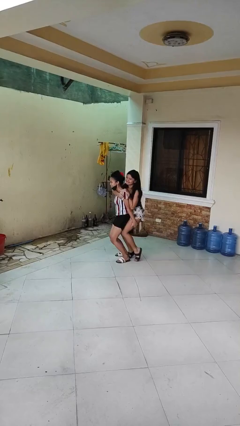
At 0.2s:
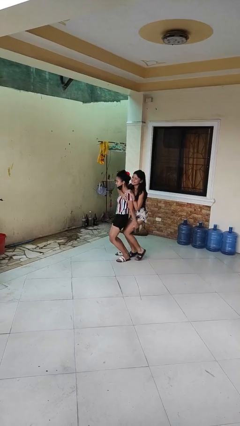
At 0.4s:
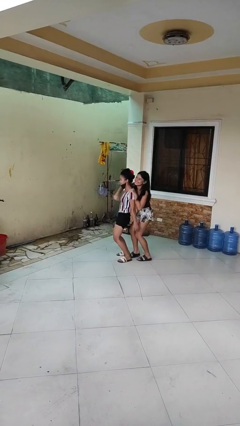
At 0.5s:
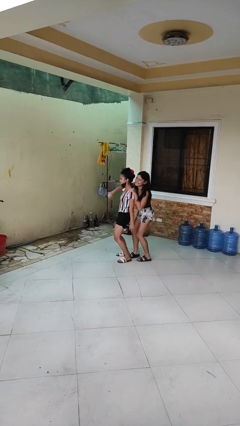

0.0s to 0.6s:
person puts down person

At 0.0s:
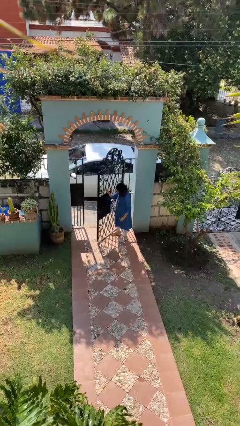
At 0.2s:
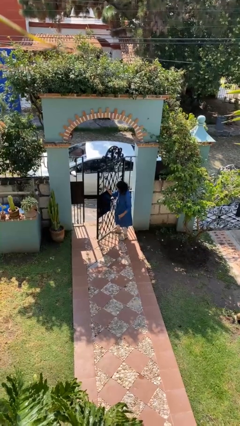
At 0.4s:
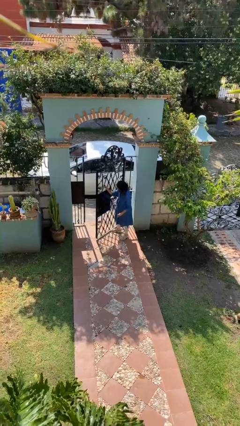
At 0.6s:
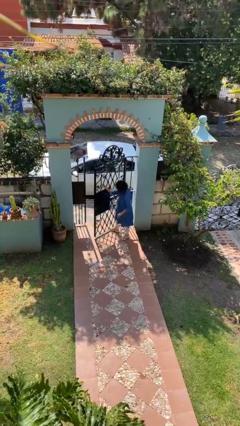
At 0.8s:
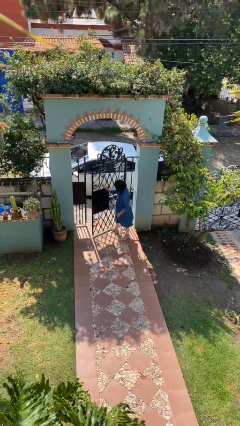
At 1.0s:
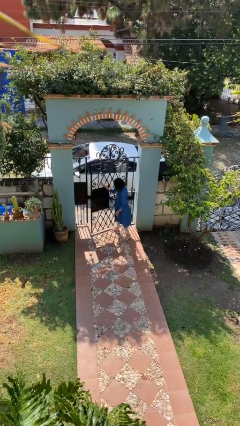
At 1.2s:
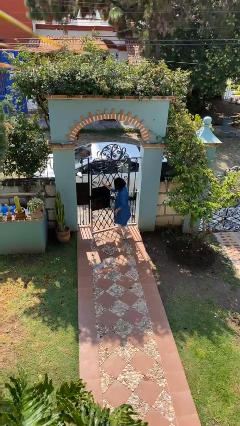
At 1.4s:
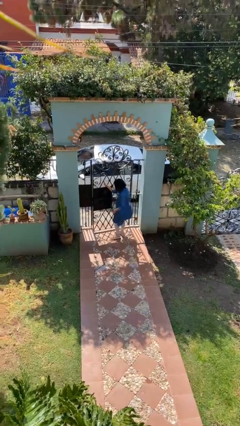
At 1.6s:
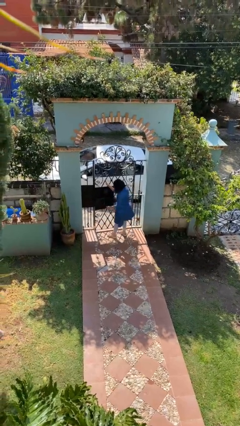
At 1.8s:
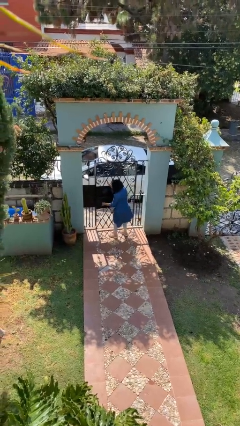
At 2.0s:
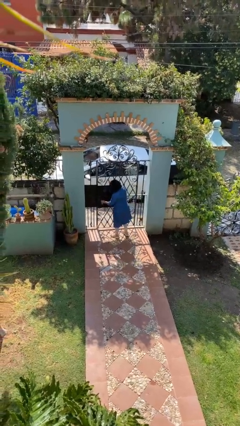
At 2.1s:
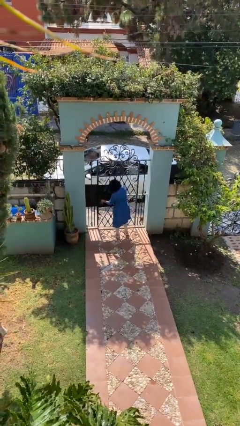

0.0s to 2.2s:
person closes facility door

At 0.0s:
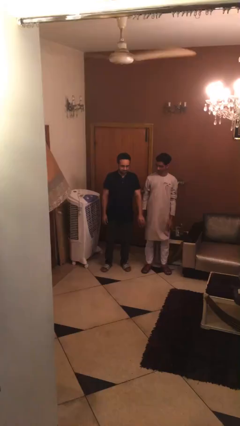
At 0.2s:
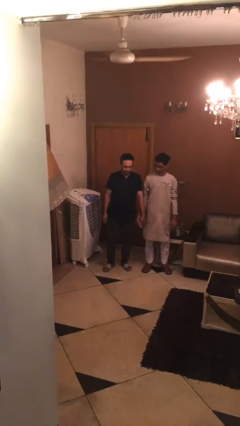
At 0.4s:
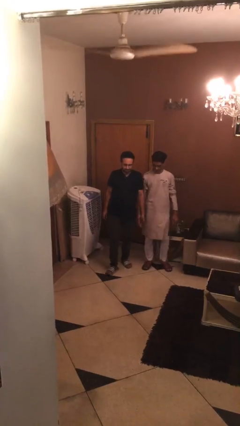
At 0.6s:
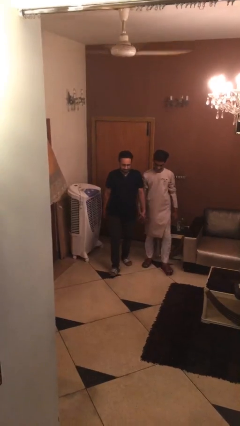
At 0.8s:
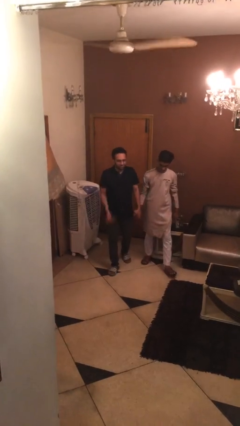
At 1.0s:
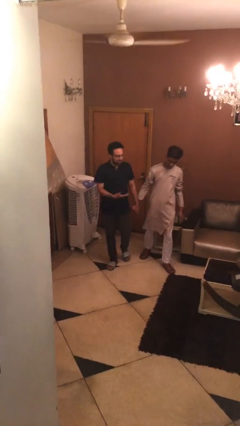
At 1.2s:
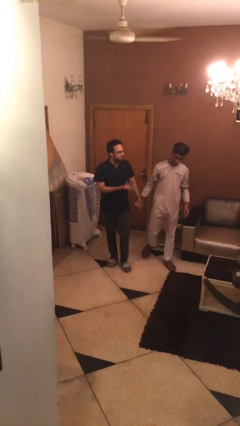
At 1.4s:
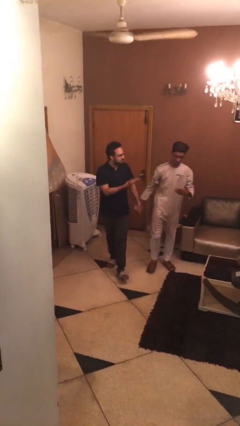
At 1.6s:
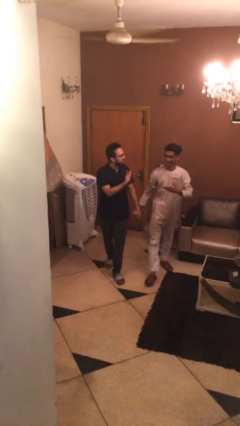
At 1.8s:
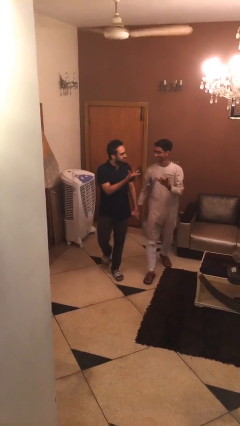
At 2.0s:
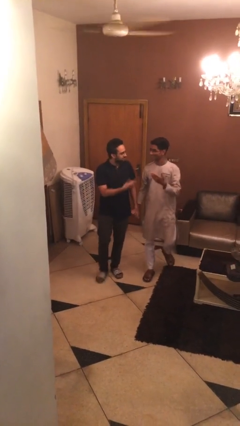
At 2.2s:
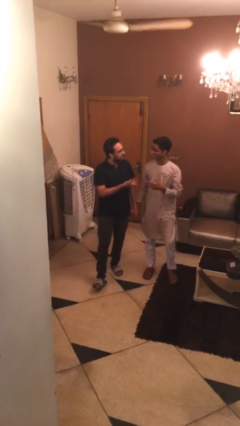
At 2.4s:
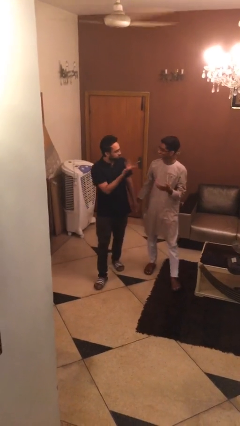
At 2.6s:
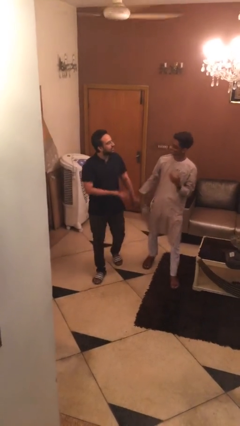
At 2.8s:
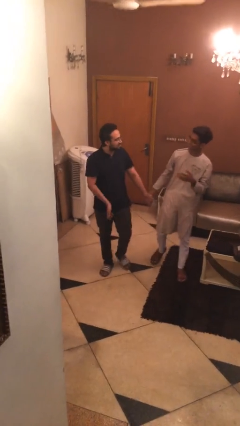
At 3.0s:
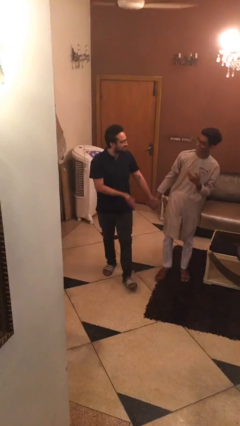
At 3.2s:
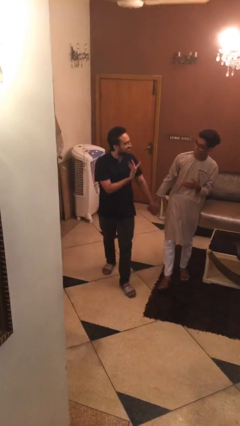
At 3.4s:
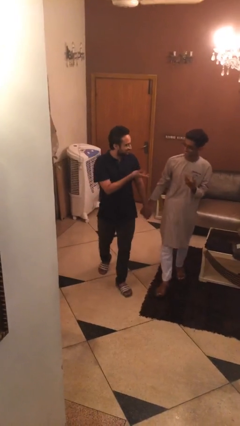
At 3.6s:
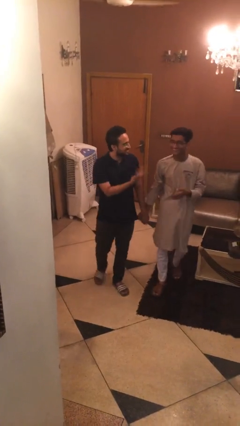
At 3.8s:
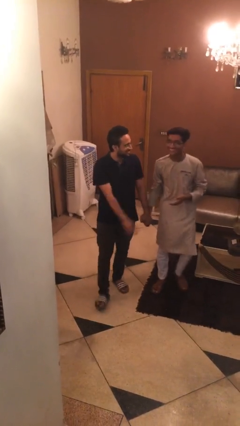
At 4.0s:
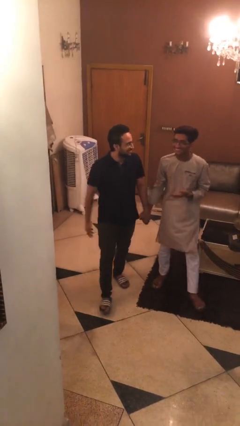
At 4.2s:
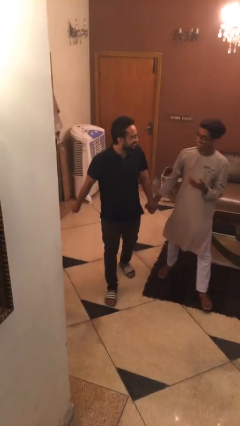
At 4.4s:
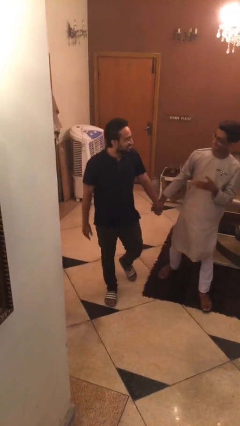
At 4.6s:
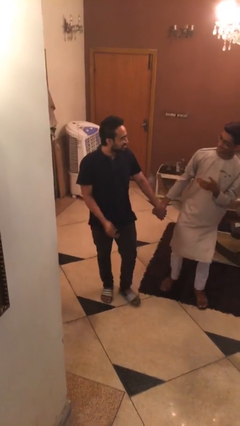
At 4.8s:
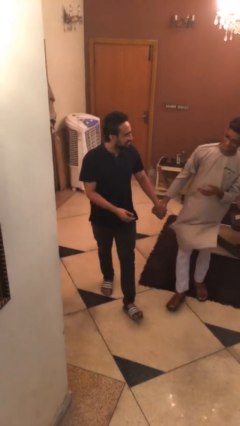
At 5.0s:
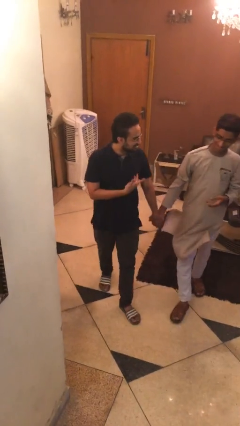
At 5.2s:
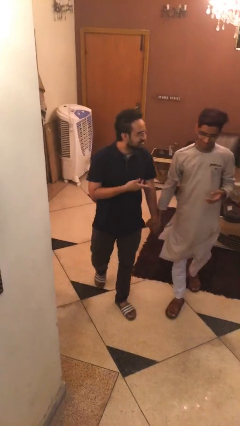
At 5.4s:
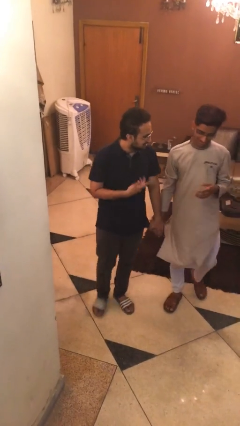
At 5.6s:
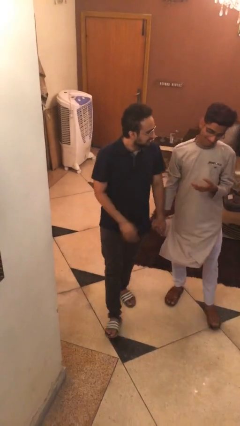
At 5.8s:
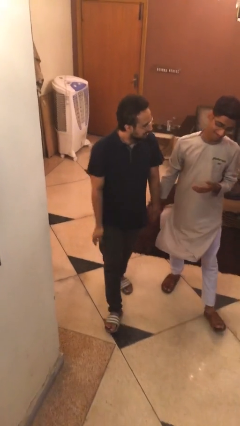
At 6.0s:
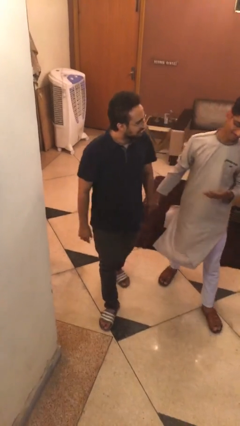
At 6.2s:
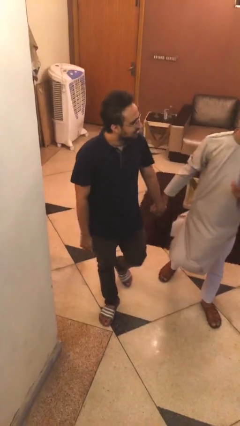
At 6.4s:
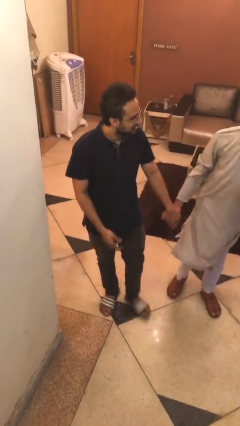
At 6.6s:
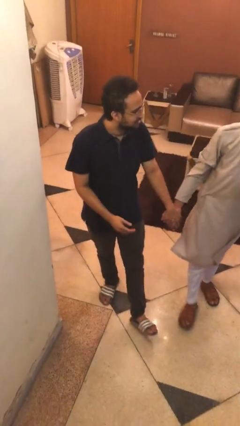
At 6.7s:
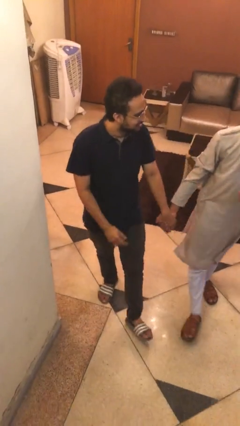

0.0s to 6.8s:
person holds hand

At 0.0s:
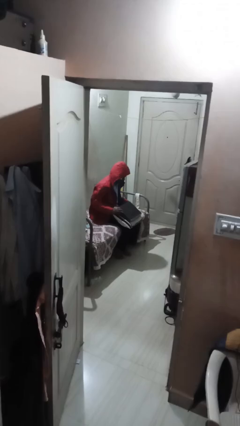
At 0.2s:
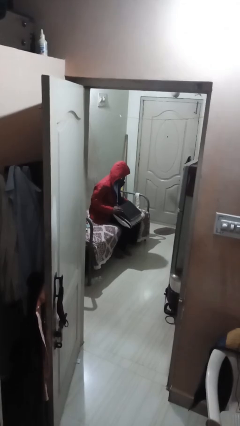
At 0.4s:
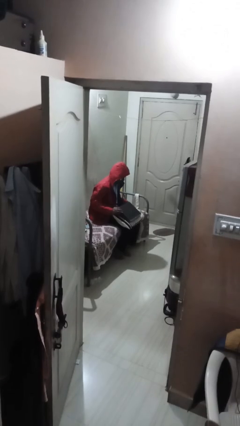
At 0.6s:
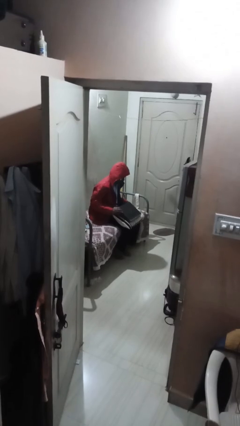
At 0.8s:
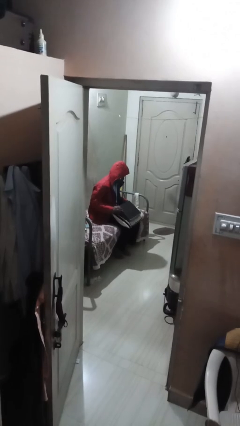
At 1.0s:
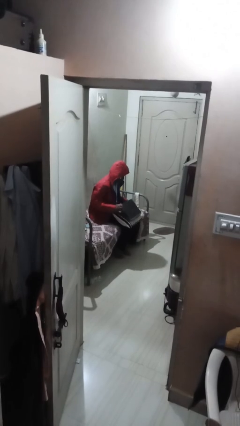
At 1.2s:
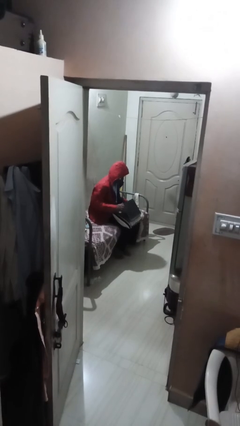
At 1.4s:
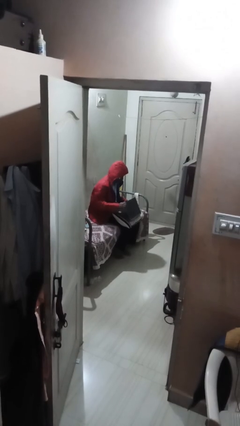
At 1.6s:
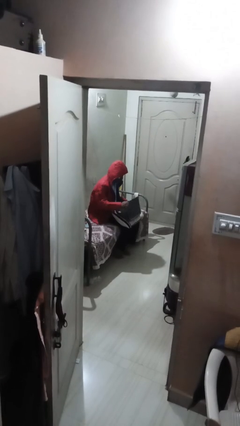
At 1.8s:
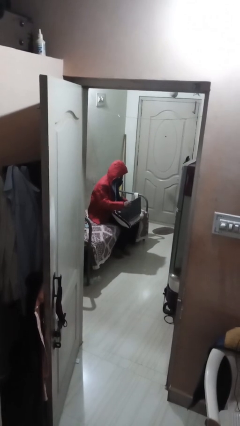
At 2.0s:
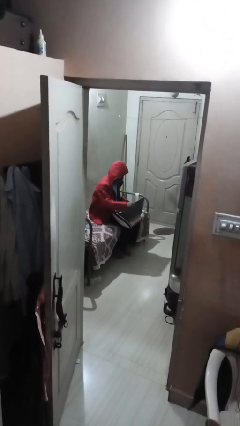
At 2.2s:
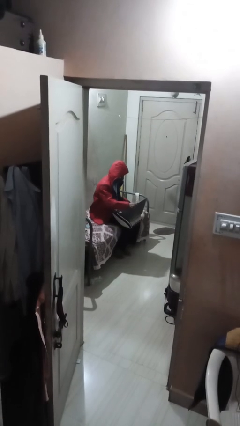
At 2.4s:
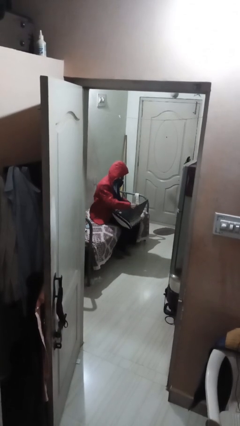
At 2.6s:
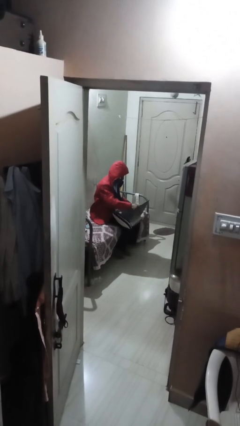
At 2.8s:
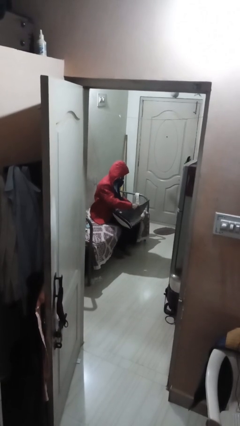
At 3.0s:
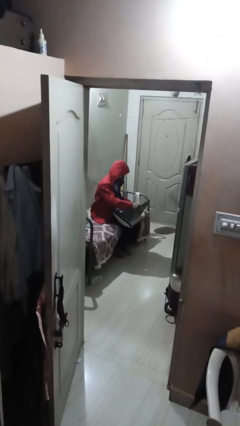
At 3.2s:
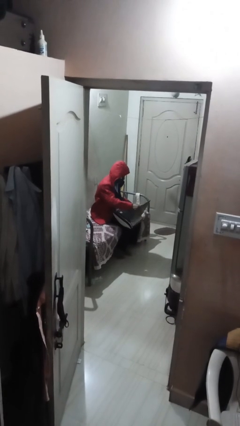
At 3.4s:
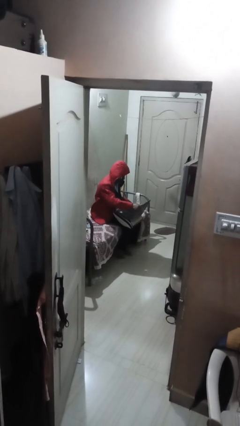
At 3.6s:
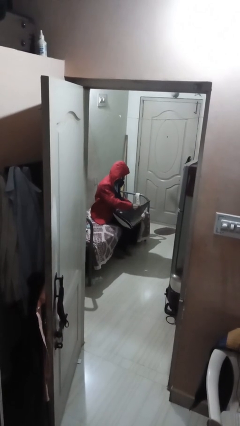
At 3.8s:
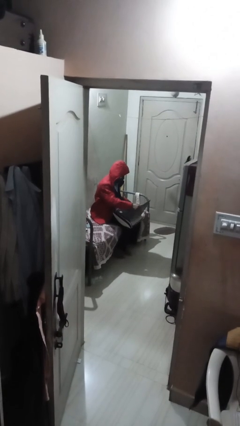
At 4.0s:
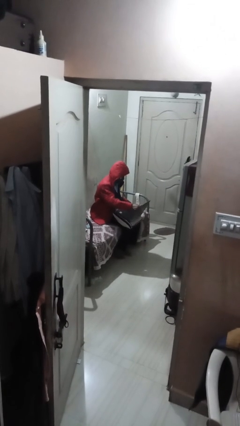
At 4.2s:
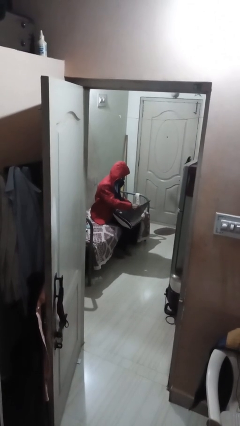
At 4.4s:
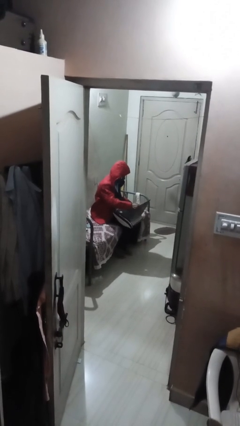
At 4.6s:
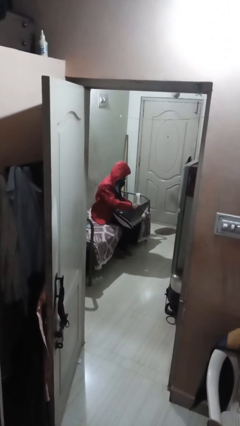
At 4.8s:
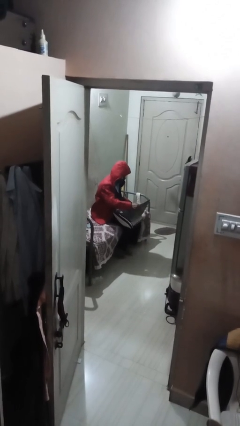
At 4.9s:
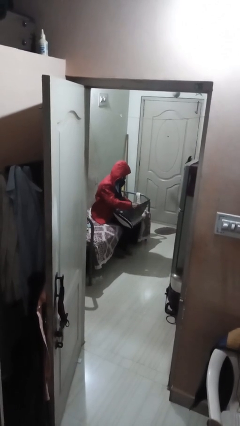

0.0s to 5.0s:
person interacts with laptop

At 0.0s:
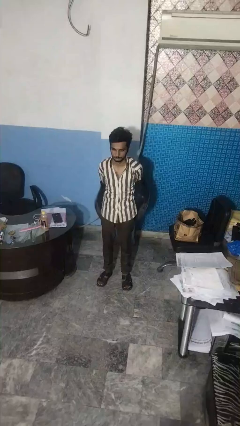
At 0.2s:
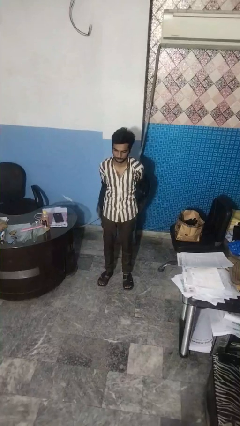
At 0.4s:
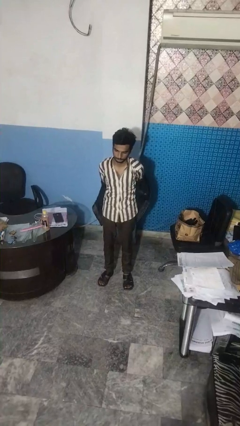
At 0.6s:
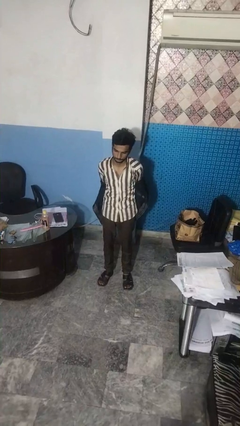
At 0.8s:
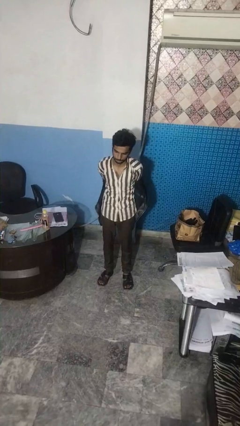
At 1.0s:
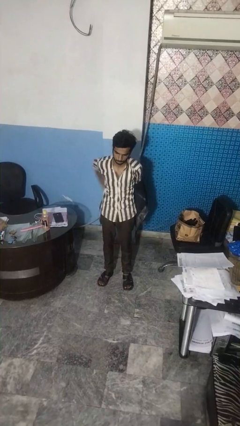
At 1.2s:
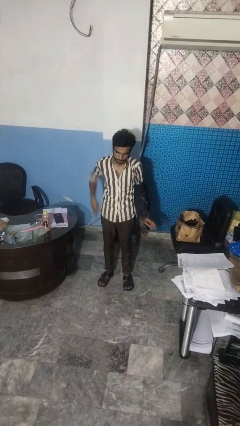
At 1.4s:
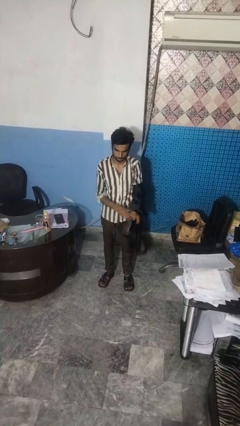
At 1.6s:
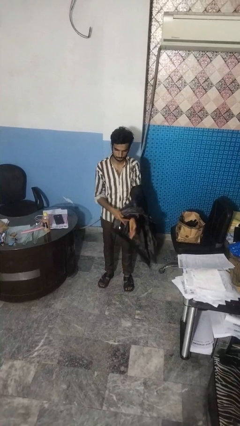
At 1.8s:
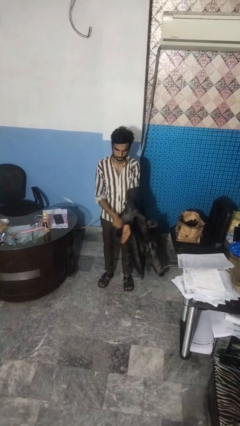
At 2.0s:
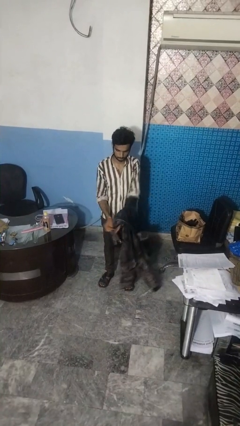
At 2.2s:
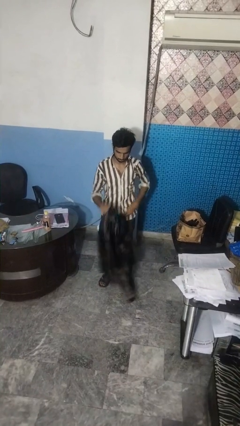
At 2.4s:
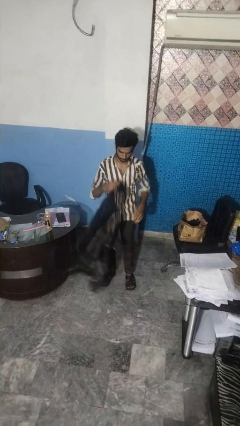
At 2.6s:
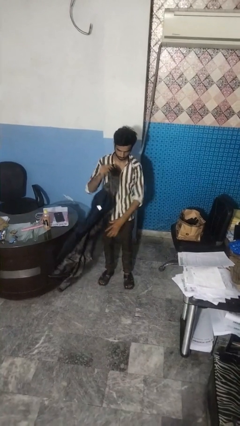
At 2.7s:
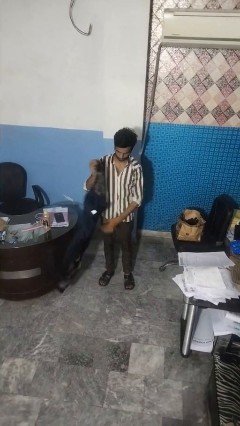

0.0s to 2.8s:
person takes off jacket

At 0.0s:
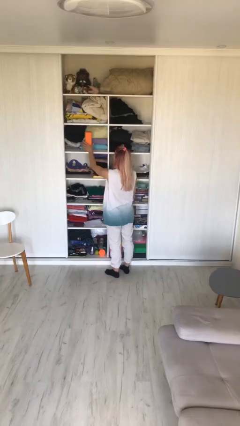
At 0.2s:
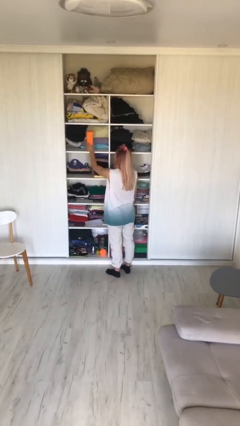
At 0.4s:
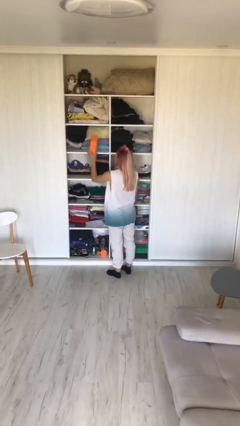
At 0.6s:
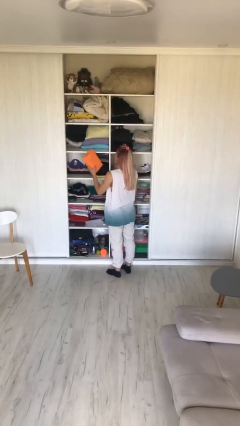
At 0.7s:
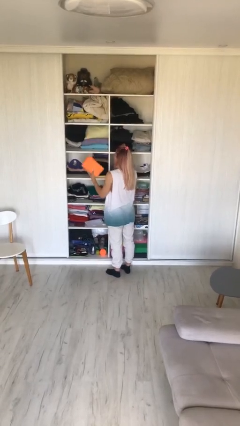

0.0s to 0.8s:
person picks up object from shelf
